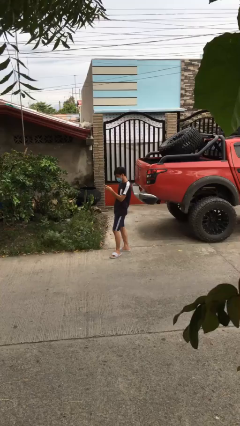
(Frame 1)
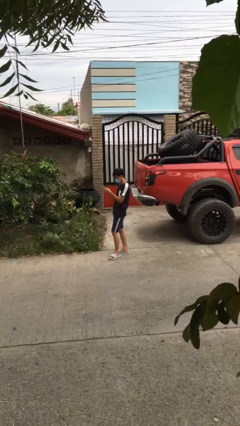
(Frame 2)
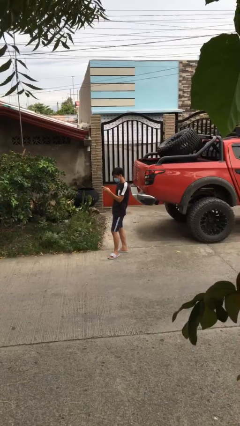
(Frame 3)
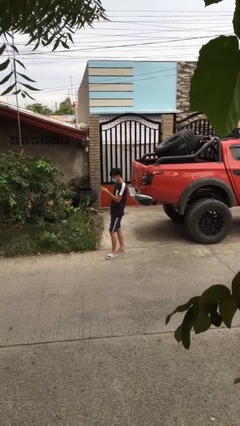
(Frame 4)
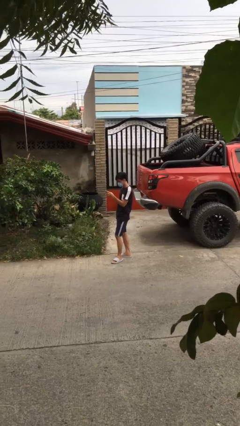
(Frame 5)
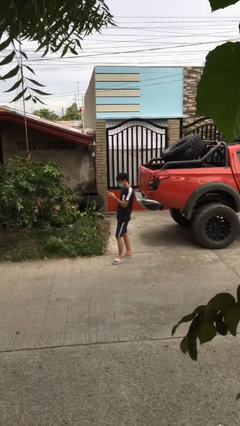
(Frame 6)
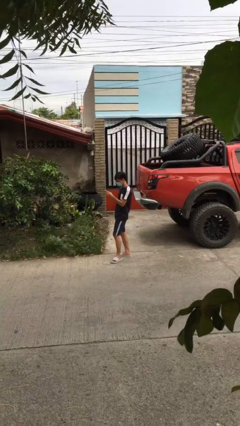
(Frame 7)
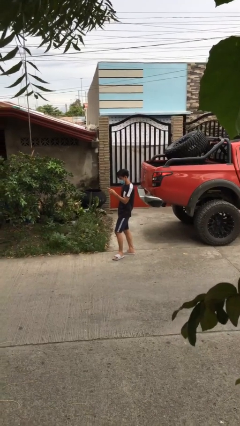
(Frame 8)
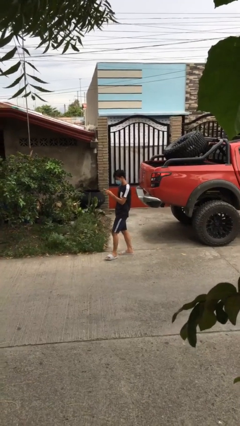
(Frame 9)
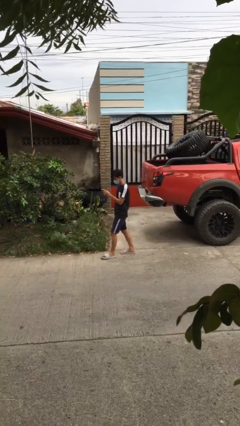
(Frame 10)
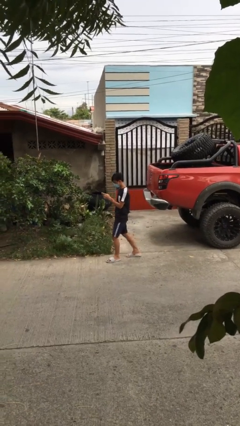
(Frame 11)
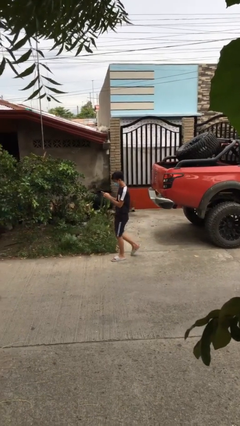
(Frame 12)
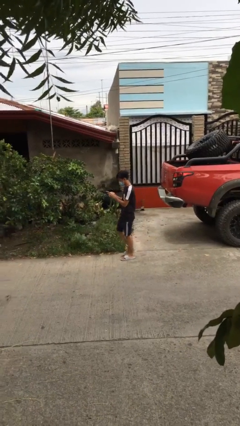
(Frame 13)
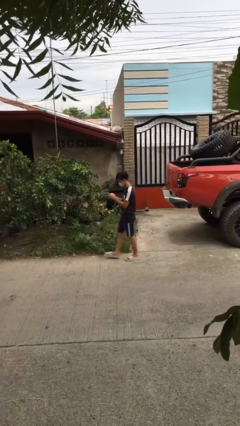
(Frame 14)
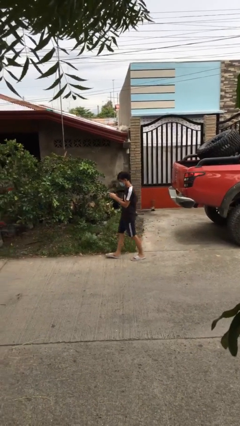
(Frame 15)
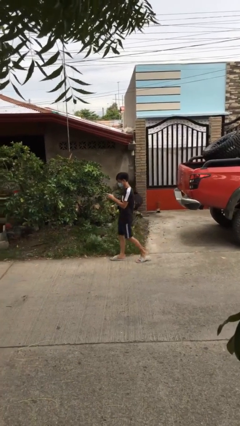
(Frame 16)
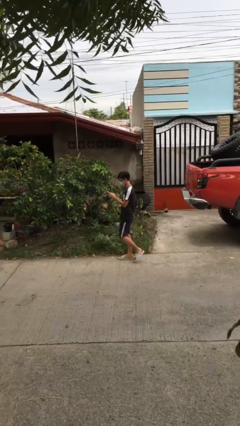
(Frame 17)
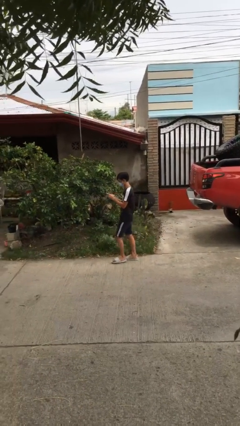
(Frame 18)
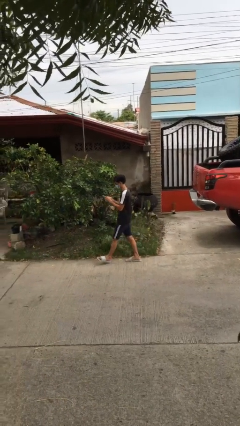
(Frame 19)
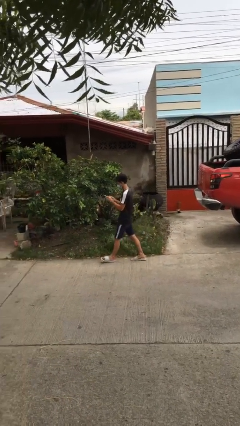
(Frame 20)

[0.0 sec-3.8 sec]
person texts on phone

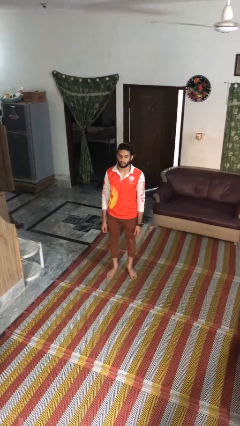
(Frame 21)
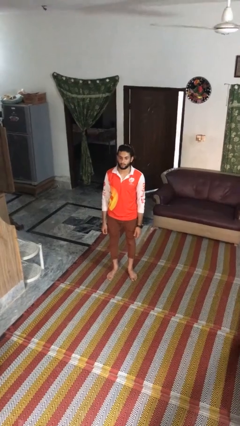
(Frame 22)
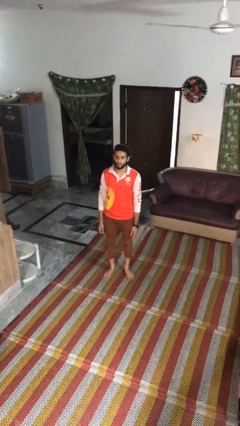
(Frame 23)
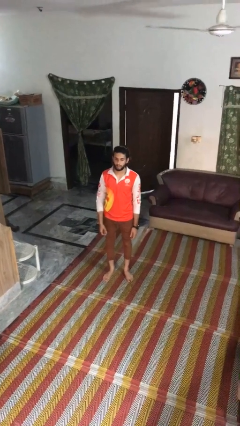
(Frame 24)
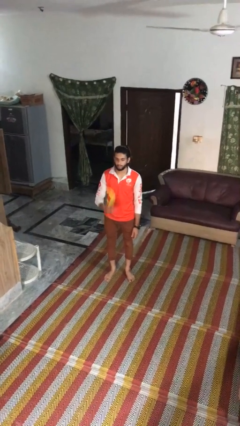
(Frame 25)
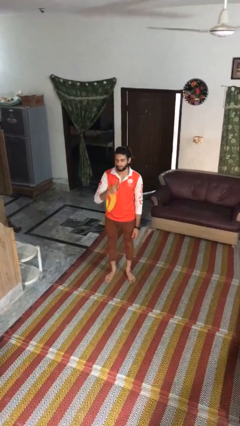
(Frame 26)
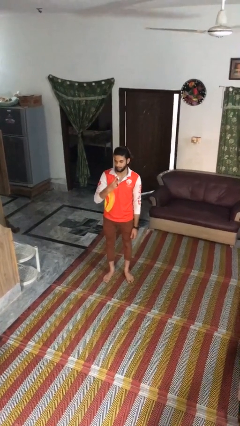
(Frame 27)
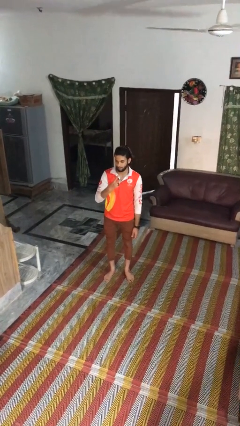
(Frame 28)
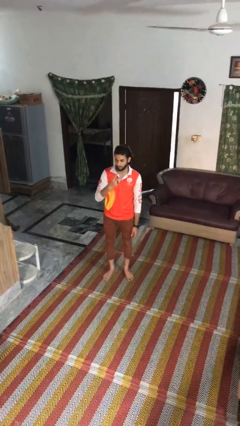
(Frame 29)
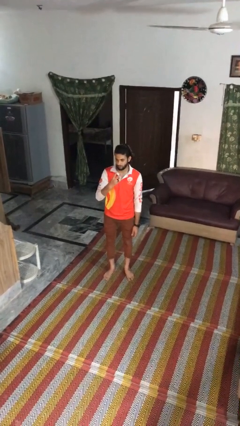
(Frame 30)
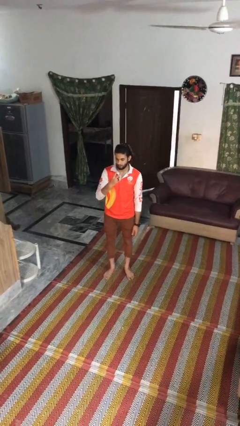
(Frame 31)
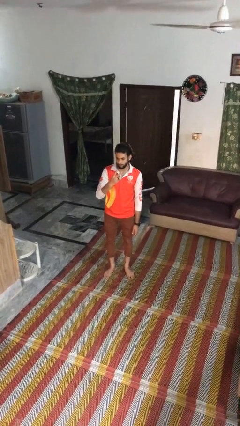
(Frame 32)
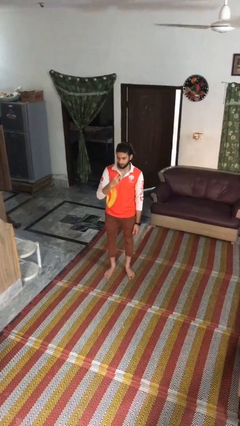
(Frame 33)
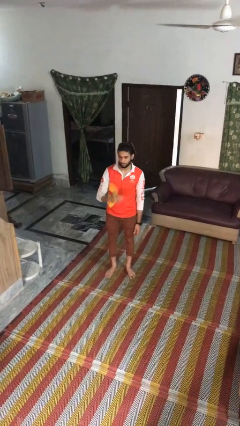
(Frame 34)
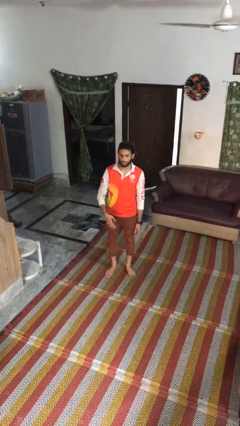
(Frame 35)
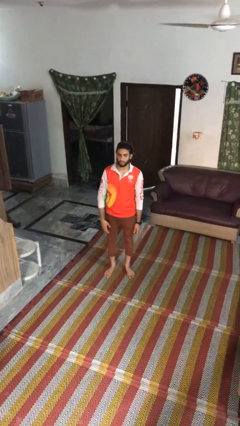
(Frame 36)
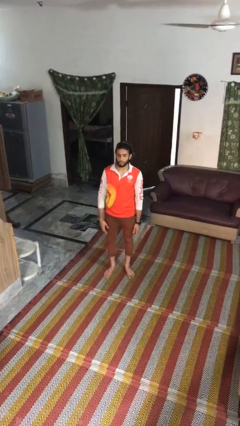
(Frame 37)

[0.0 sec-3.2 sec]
person gestures peace

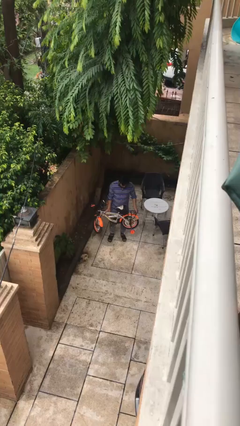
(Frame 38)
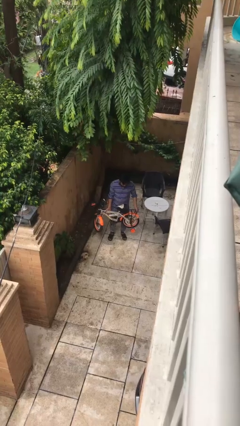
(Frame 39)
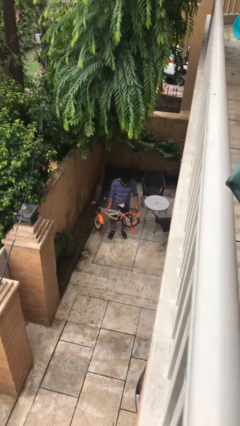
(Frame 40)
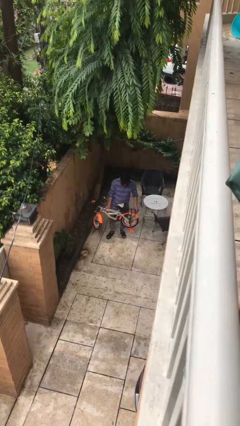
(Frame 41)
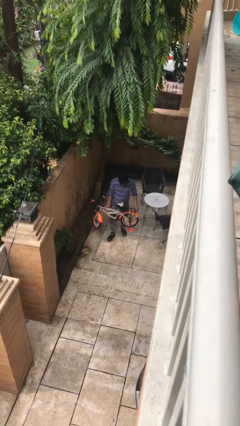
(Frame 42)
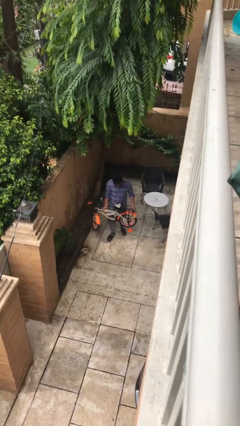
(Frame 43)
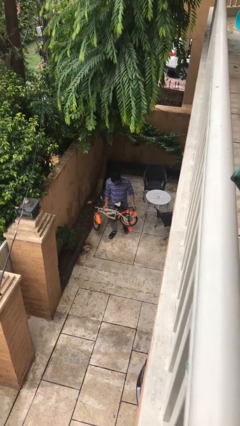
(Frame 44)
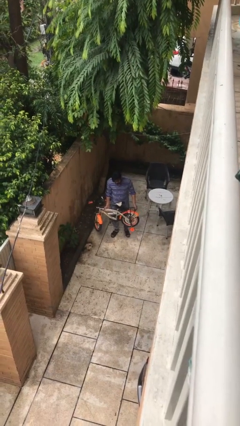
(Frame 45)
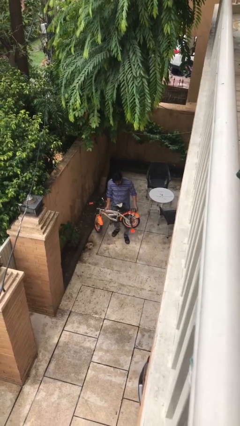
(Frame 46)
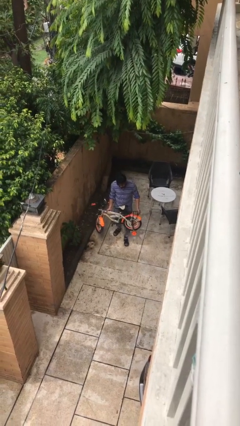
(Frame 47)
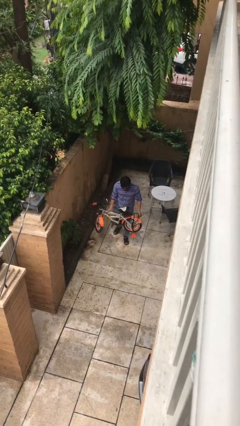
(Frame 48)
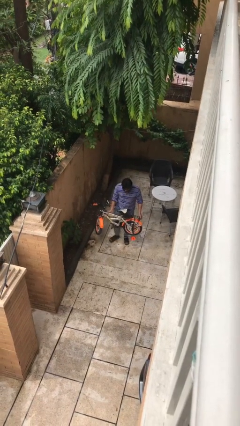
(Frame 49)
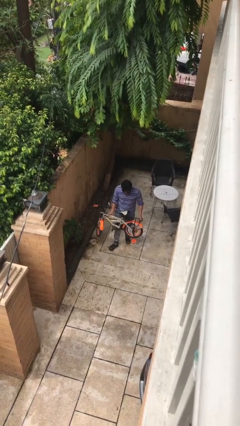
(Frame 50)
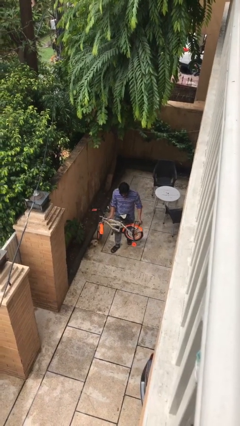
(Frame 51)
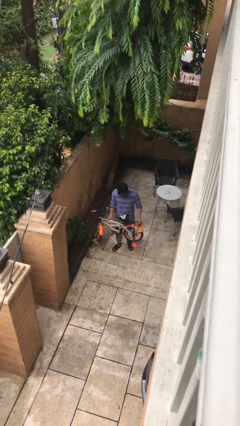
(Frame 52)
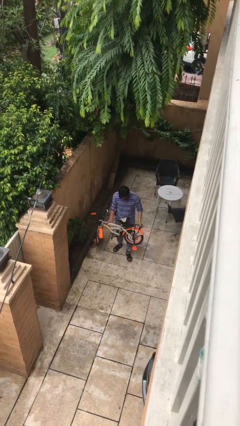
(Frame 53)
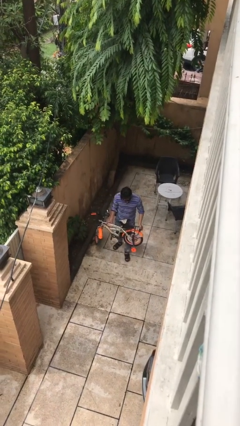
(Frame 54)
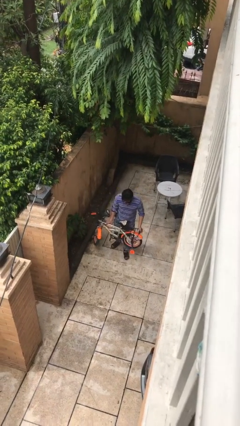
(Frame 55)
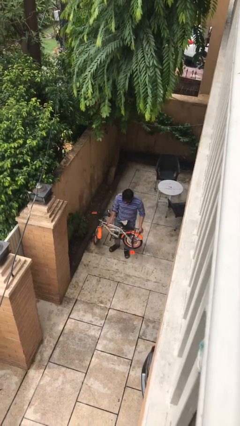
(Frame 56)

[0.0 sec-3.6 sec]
person carries heavy object

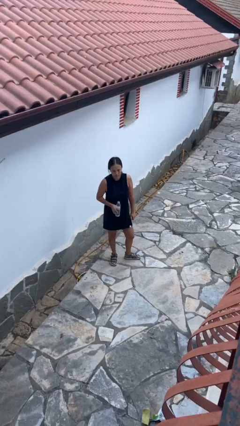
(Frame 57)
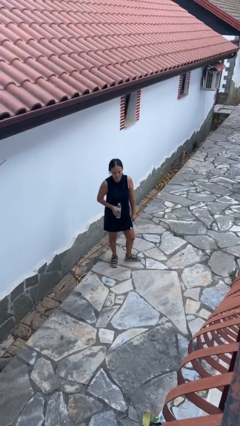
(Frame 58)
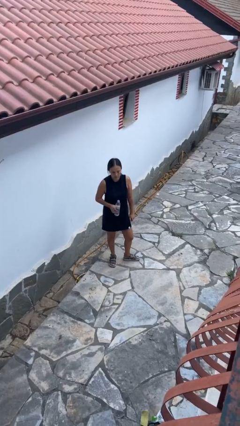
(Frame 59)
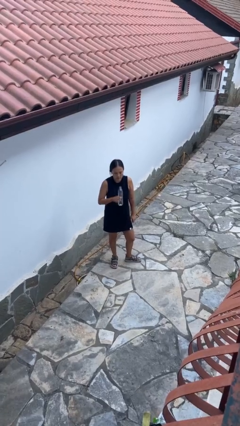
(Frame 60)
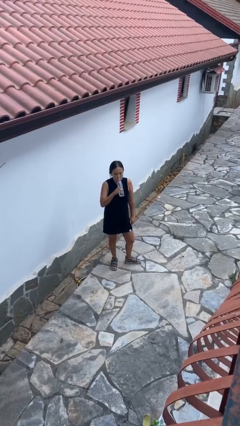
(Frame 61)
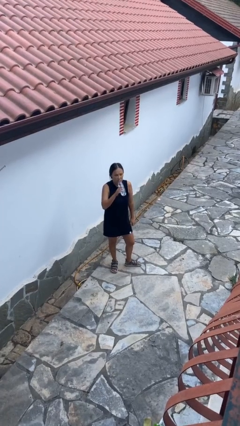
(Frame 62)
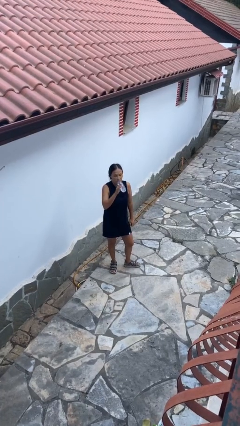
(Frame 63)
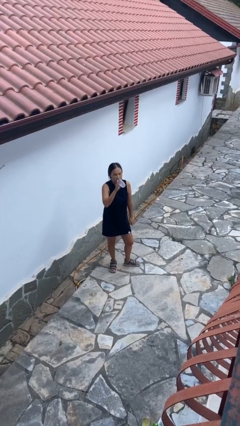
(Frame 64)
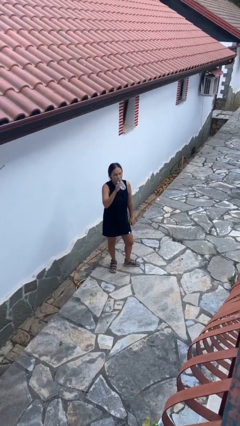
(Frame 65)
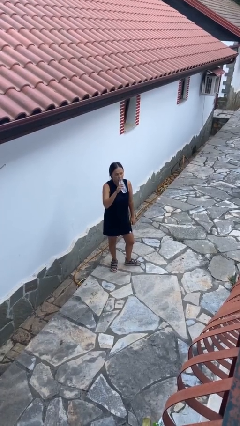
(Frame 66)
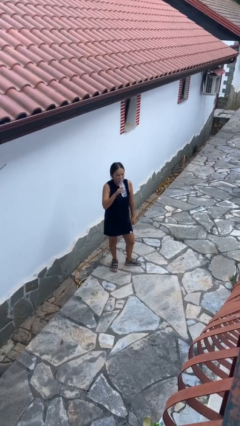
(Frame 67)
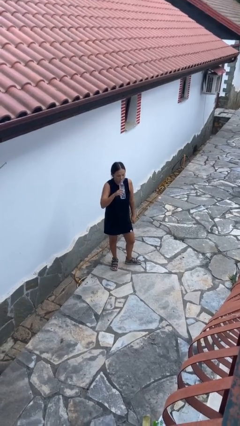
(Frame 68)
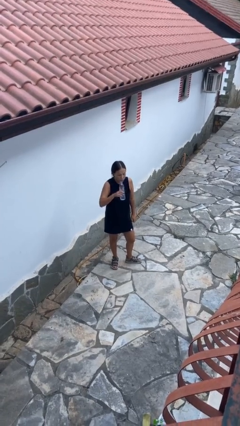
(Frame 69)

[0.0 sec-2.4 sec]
person drinks from bottle

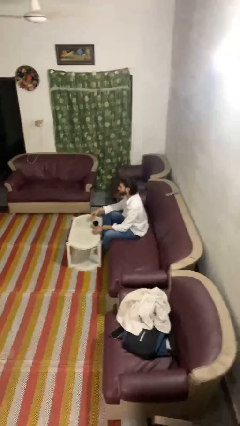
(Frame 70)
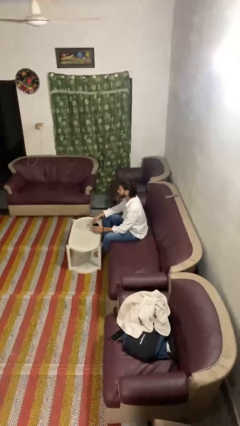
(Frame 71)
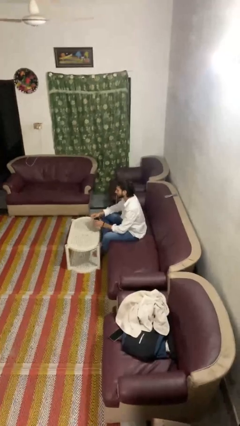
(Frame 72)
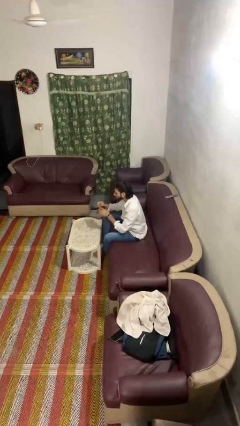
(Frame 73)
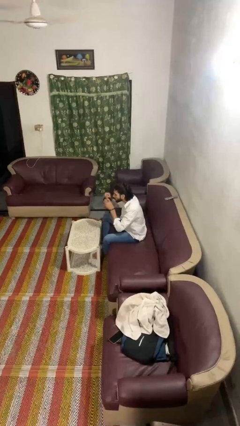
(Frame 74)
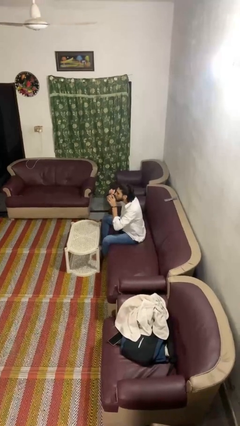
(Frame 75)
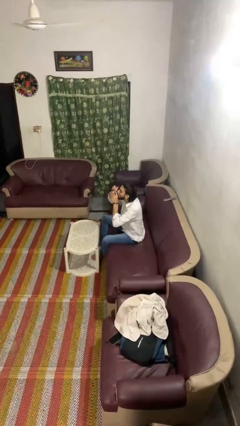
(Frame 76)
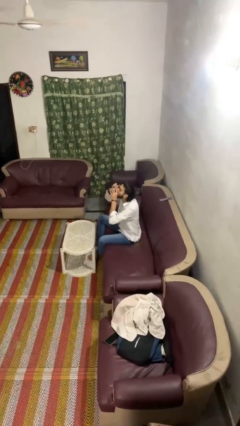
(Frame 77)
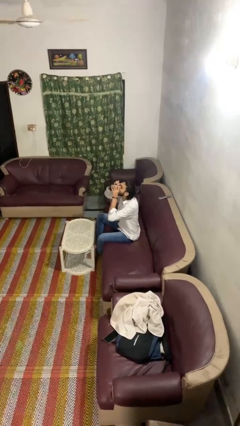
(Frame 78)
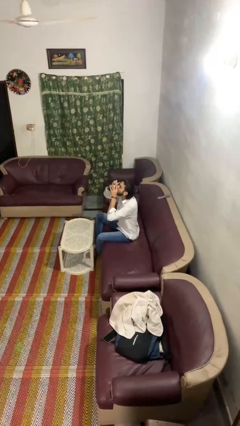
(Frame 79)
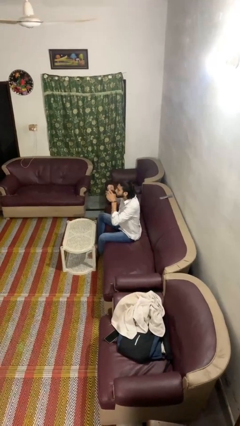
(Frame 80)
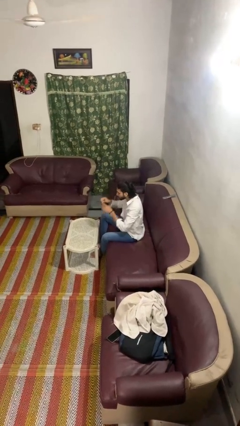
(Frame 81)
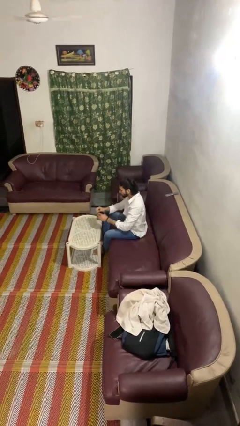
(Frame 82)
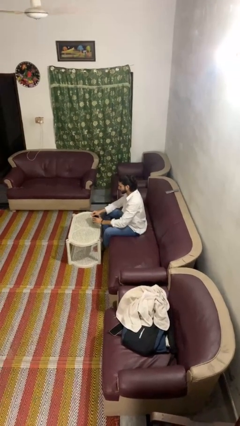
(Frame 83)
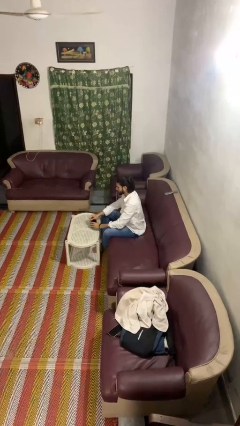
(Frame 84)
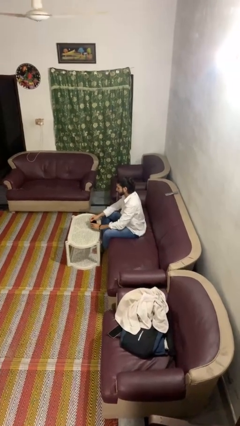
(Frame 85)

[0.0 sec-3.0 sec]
person drinks from mug

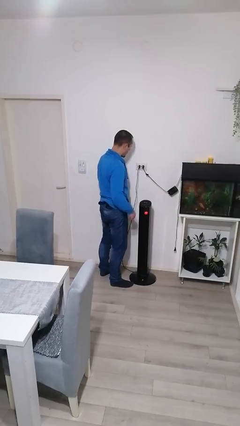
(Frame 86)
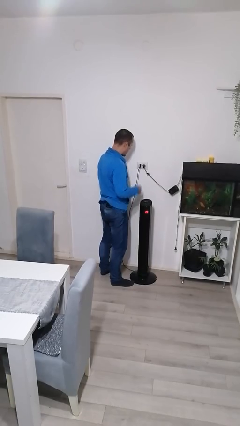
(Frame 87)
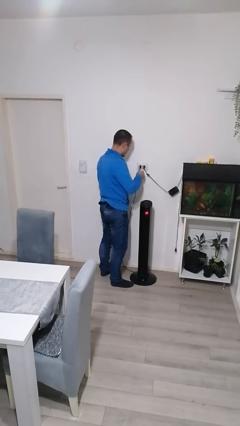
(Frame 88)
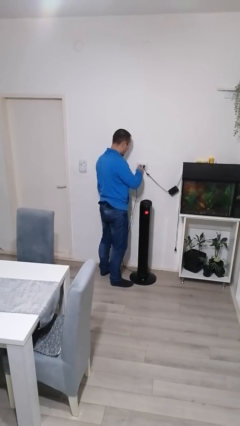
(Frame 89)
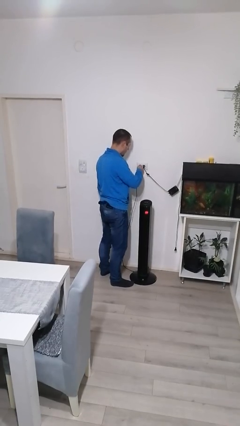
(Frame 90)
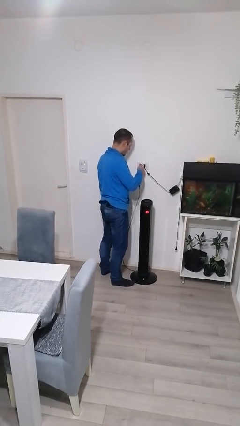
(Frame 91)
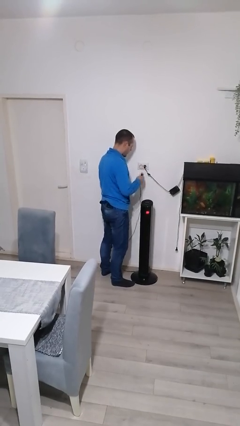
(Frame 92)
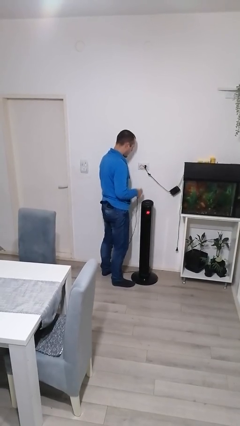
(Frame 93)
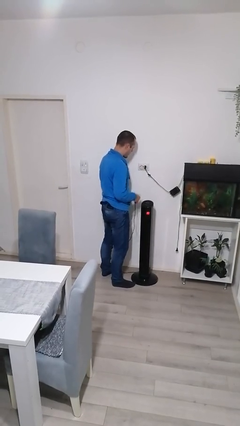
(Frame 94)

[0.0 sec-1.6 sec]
person unplugs from electrical socket
